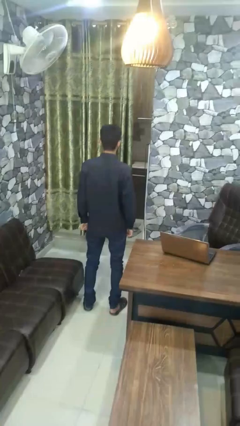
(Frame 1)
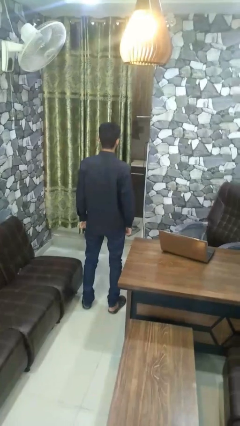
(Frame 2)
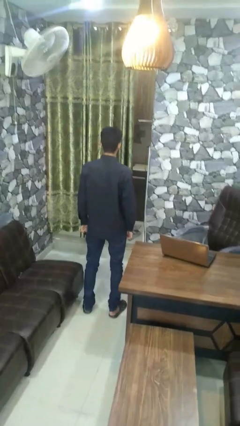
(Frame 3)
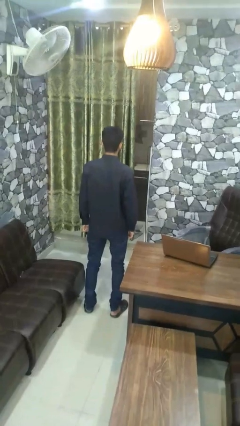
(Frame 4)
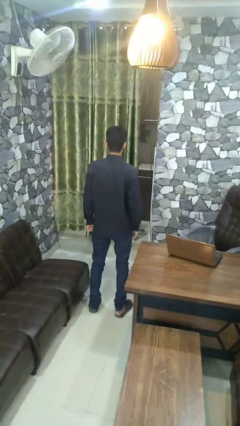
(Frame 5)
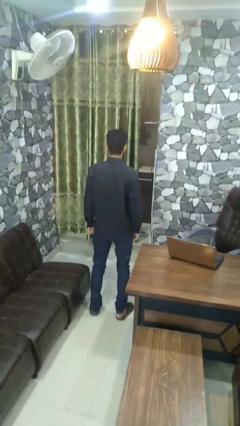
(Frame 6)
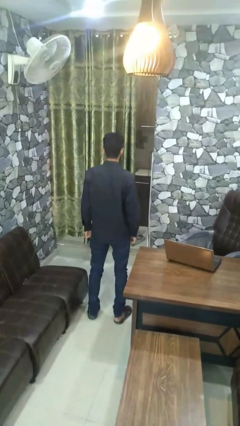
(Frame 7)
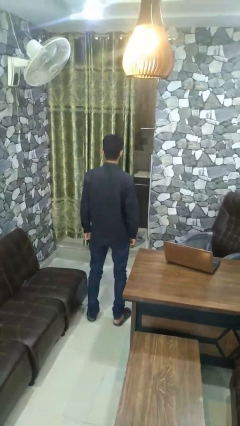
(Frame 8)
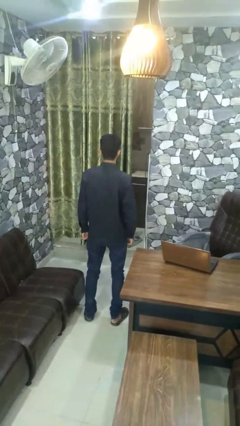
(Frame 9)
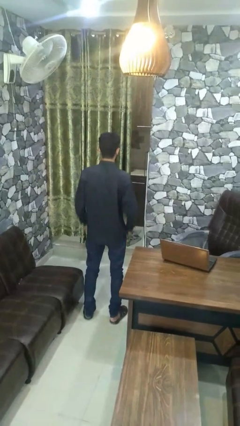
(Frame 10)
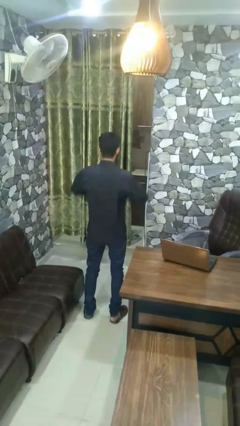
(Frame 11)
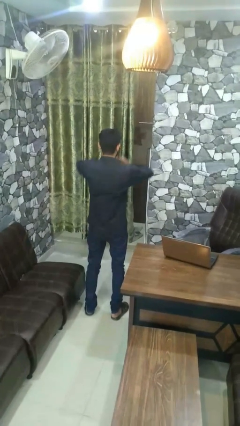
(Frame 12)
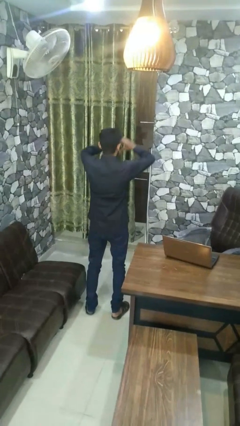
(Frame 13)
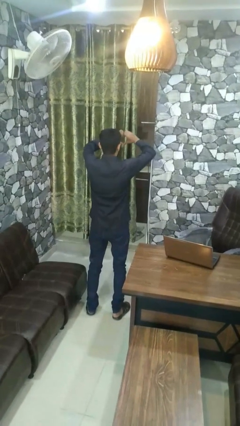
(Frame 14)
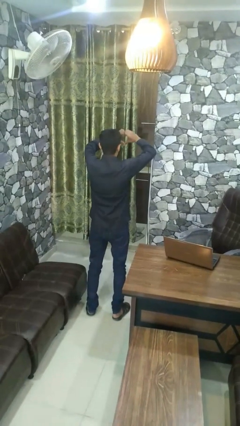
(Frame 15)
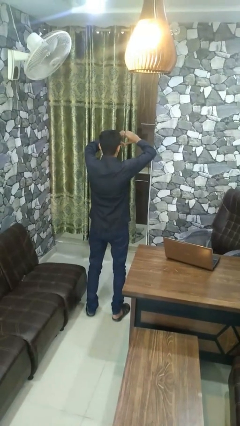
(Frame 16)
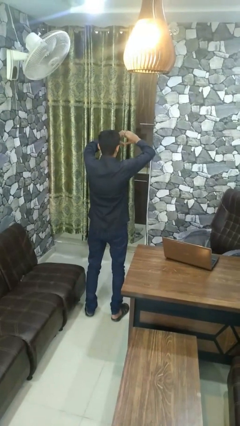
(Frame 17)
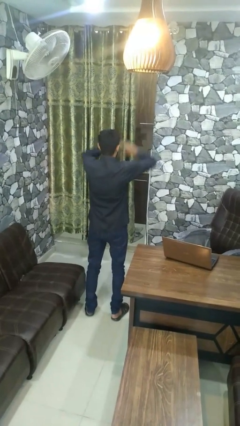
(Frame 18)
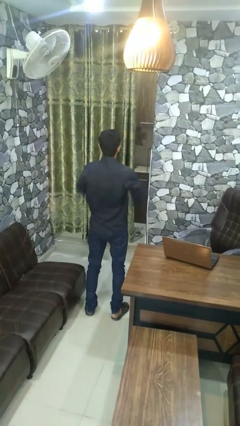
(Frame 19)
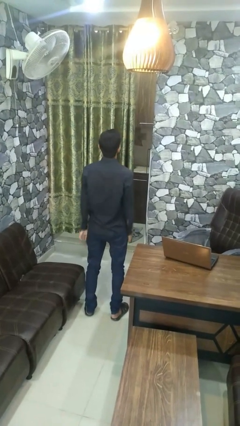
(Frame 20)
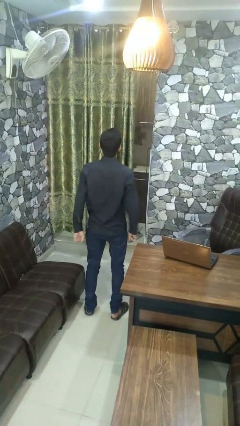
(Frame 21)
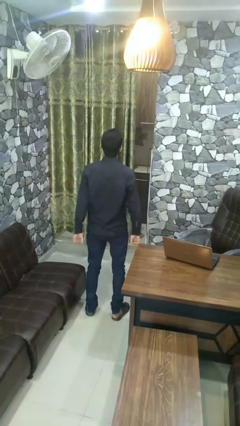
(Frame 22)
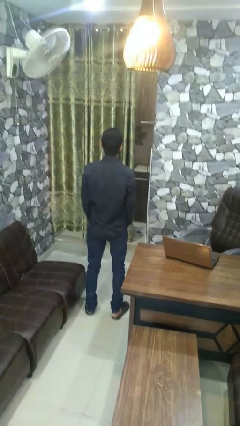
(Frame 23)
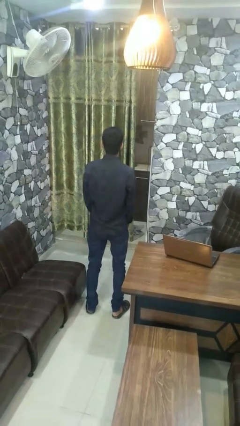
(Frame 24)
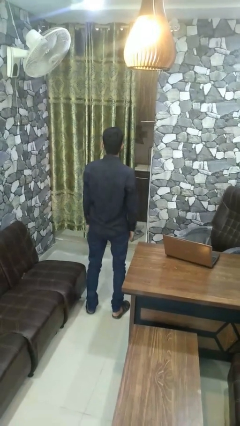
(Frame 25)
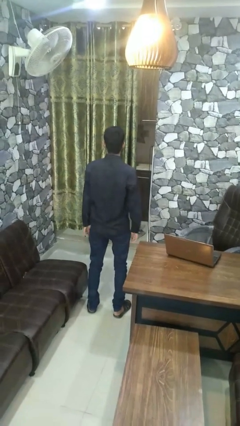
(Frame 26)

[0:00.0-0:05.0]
person gestures heart

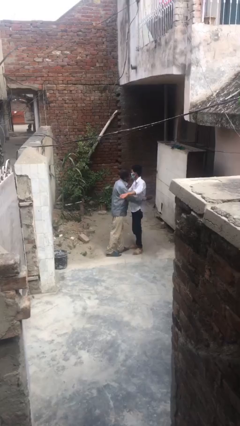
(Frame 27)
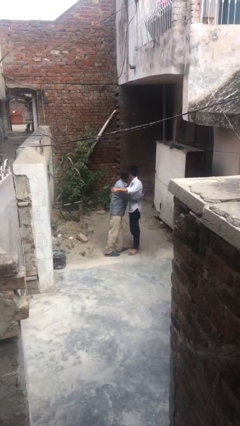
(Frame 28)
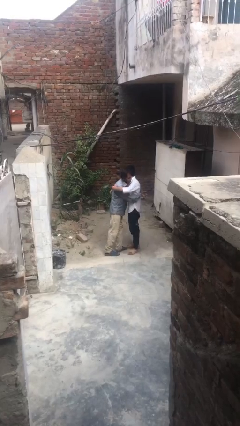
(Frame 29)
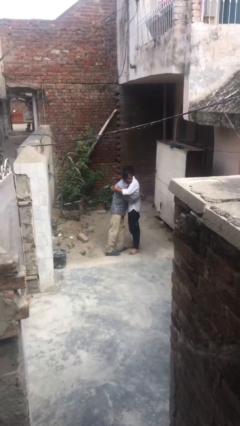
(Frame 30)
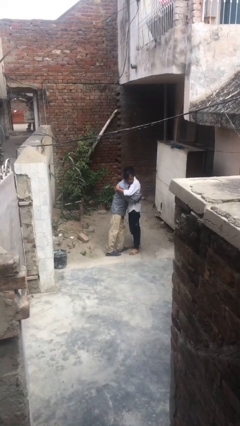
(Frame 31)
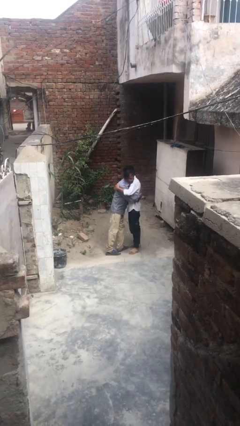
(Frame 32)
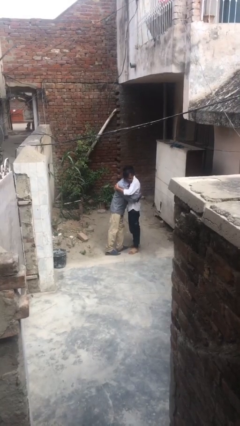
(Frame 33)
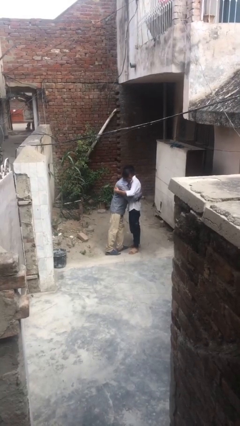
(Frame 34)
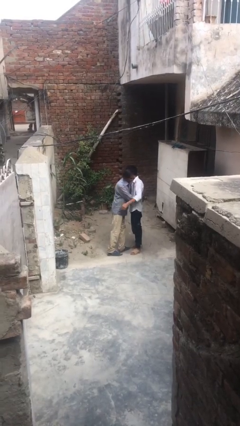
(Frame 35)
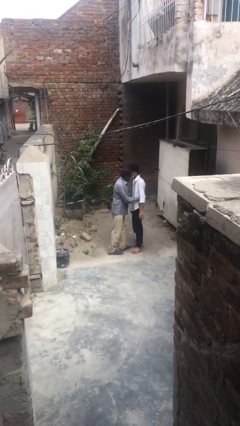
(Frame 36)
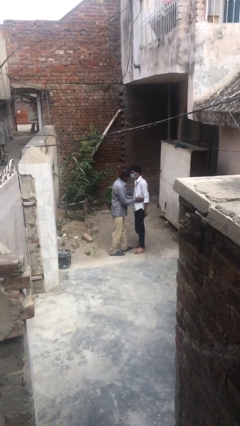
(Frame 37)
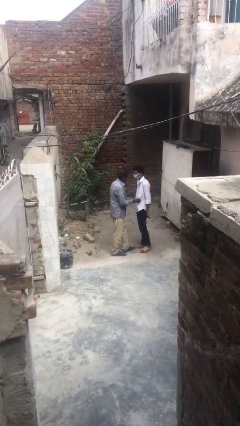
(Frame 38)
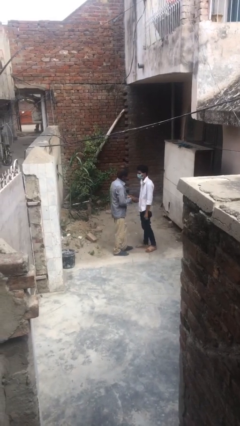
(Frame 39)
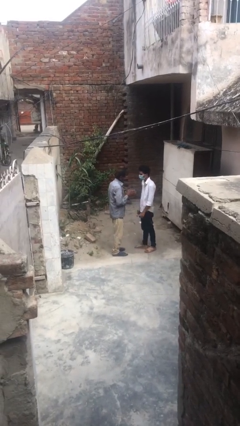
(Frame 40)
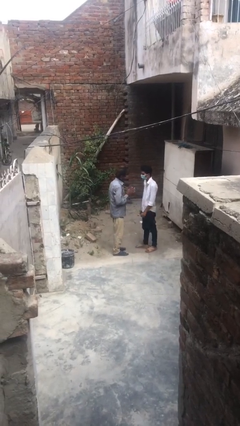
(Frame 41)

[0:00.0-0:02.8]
person embraces person

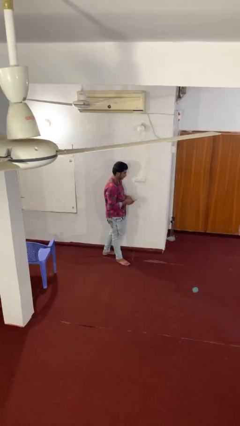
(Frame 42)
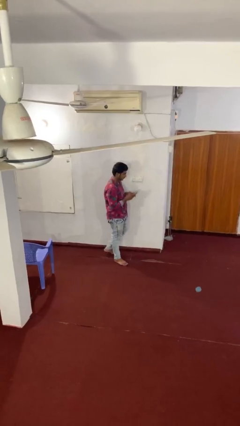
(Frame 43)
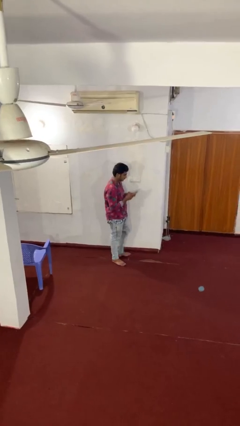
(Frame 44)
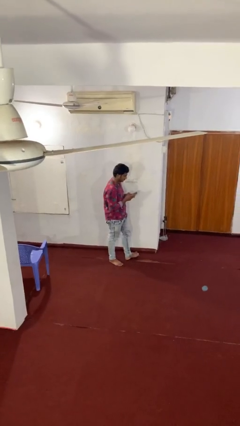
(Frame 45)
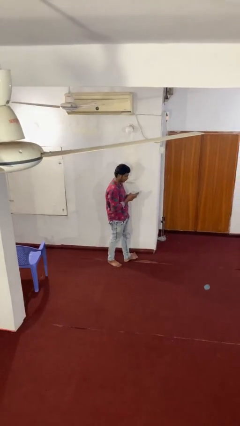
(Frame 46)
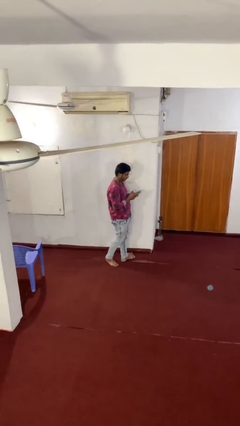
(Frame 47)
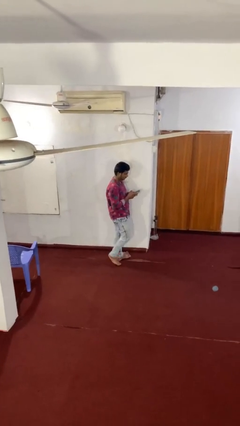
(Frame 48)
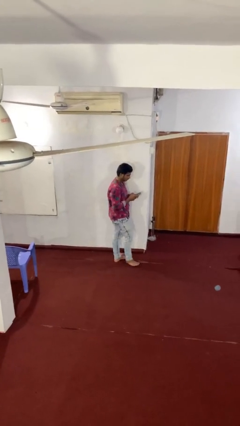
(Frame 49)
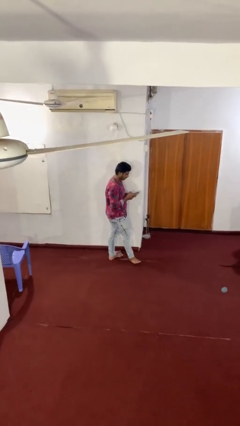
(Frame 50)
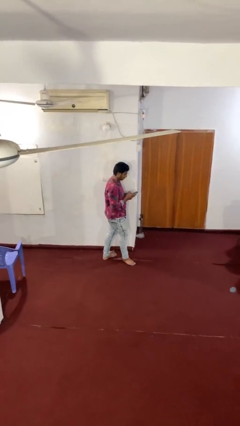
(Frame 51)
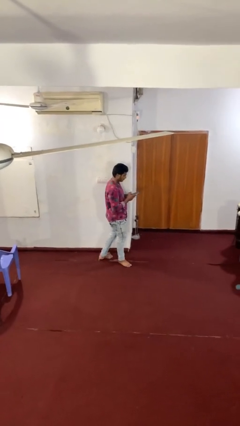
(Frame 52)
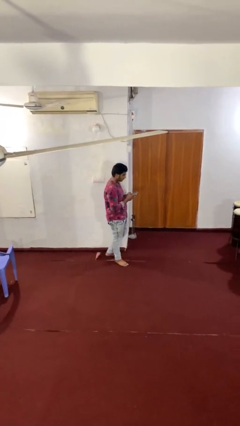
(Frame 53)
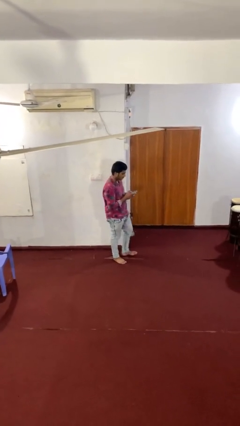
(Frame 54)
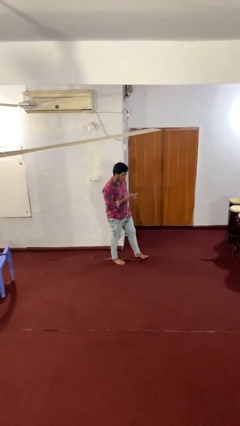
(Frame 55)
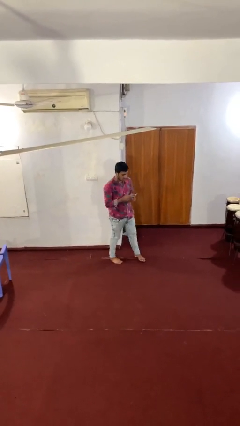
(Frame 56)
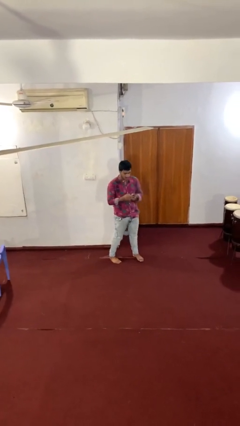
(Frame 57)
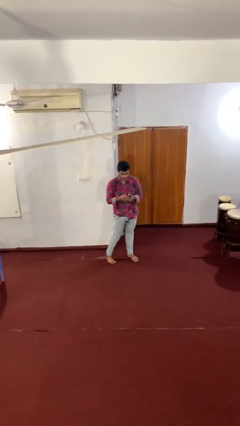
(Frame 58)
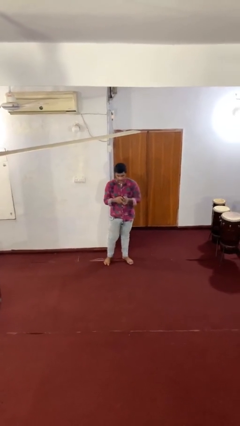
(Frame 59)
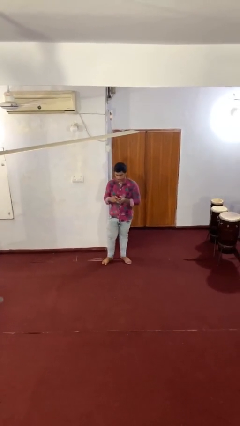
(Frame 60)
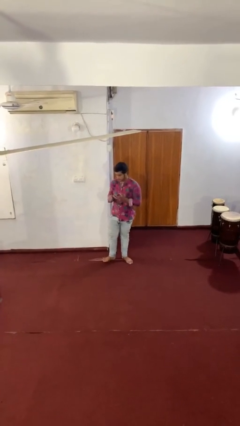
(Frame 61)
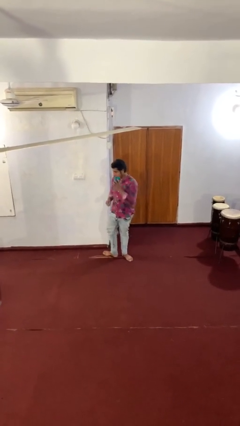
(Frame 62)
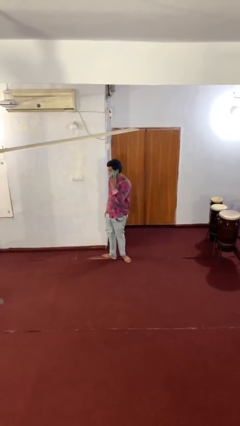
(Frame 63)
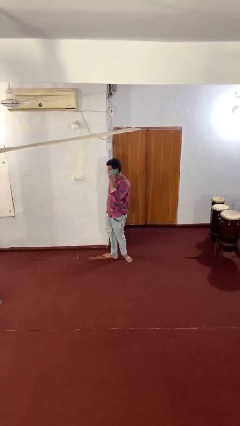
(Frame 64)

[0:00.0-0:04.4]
person texts on phone

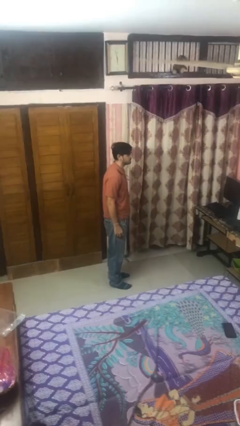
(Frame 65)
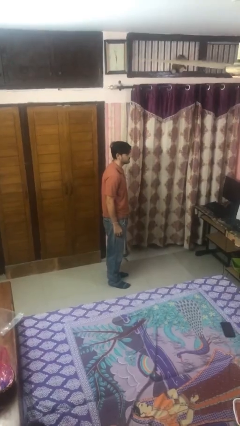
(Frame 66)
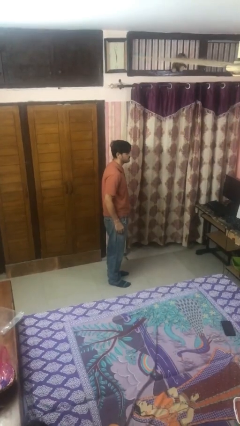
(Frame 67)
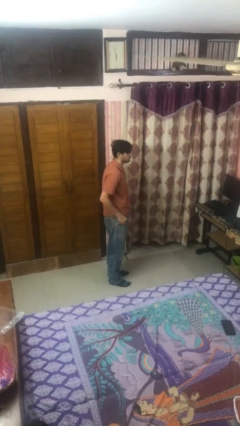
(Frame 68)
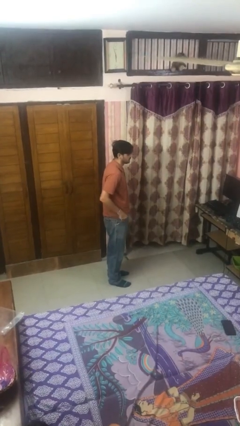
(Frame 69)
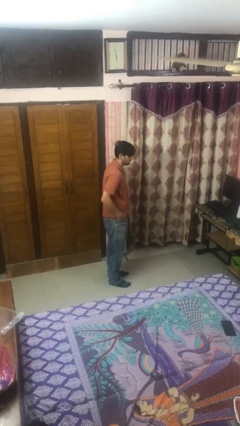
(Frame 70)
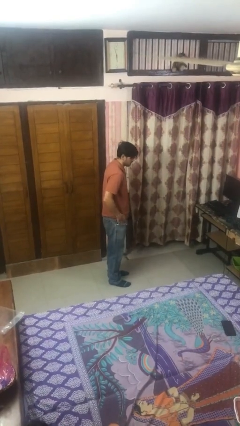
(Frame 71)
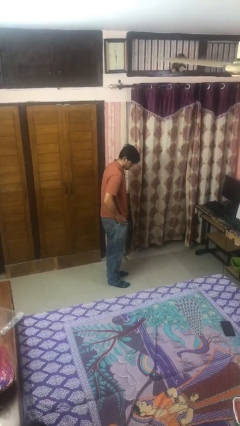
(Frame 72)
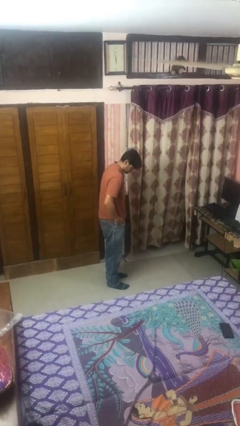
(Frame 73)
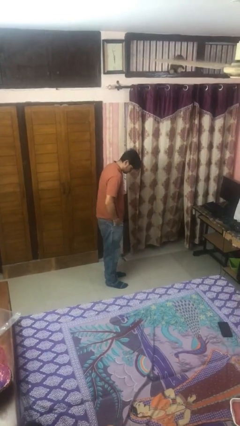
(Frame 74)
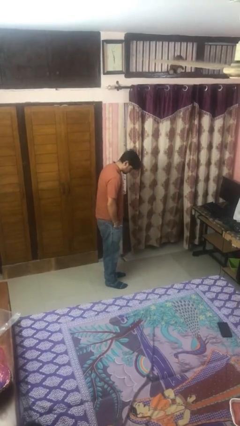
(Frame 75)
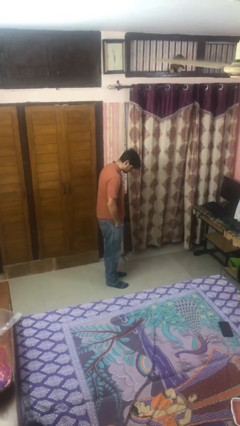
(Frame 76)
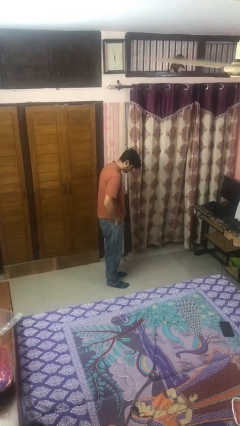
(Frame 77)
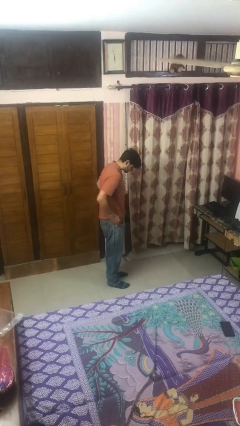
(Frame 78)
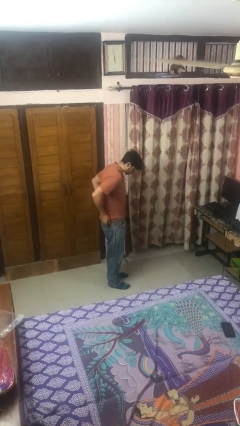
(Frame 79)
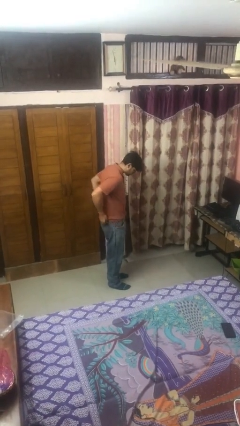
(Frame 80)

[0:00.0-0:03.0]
person puts hands in back pockets

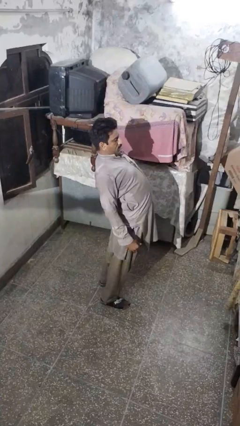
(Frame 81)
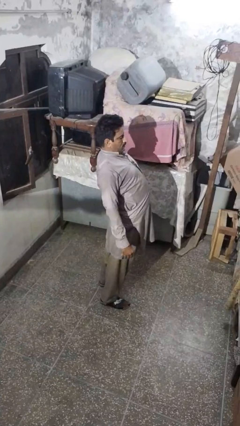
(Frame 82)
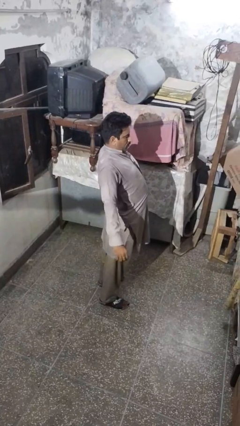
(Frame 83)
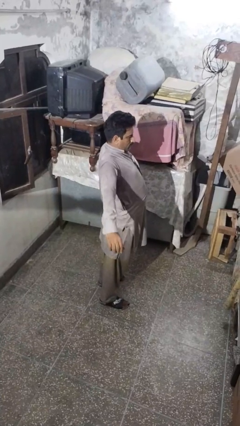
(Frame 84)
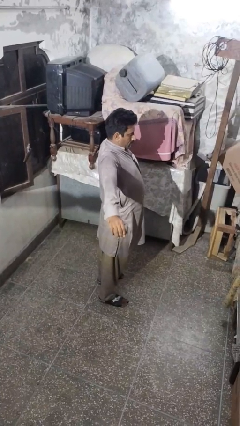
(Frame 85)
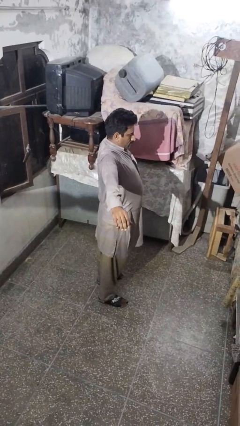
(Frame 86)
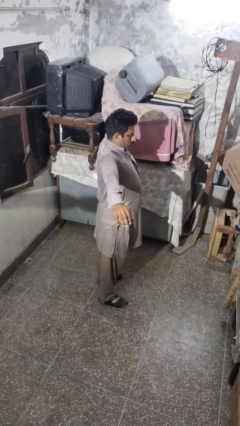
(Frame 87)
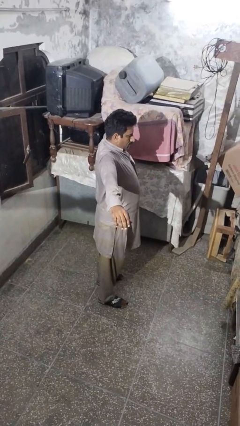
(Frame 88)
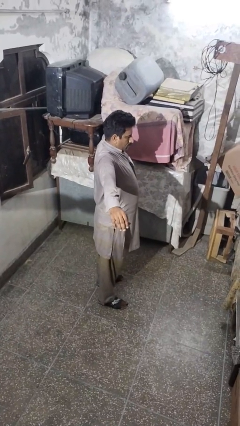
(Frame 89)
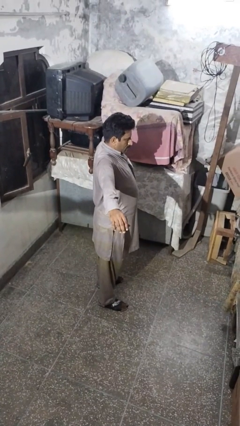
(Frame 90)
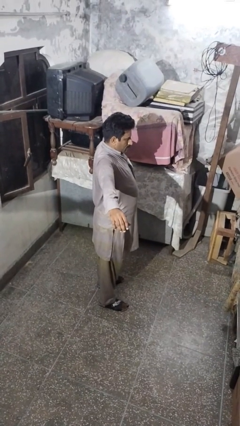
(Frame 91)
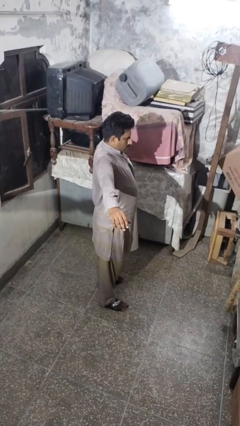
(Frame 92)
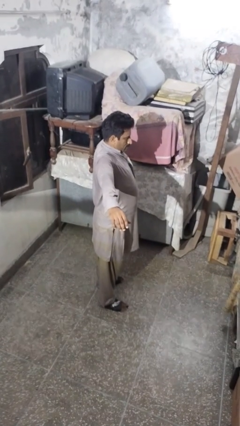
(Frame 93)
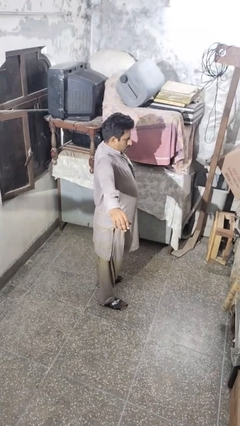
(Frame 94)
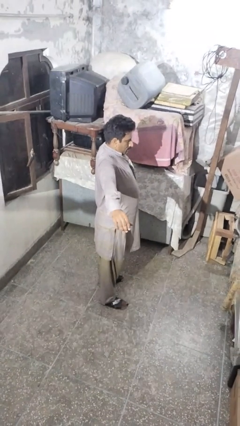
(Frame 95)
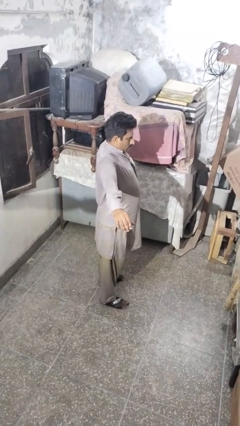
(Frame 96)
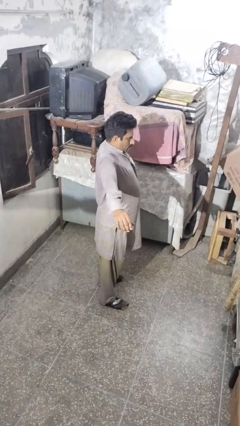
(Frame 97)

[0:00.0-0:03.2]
person stretches arms to side
